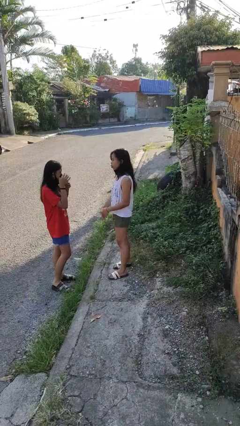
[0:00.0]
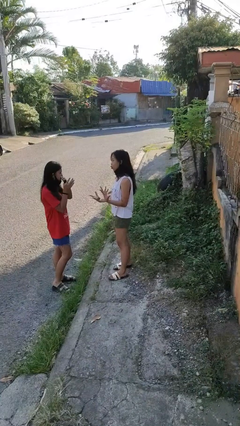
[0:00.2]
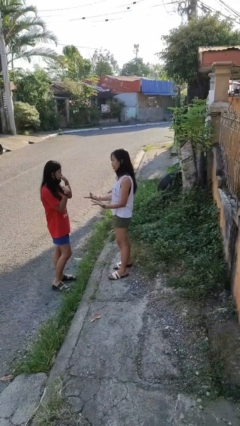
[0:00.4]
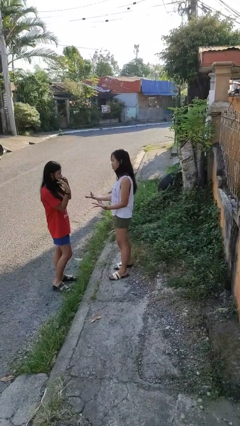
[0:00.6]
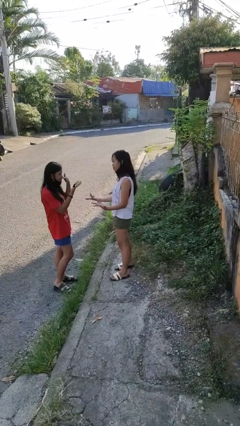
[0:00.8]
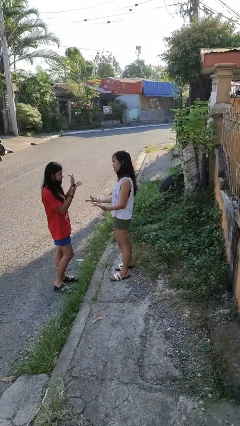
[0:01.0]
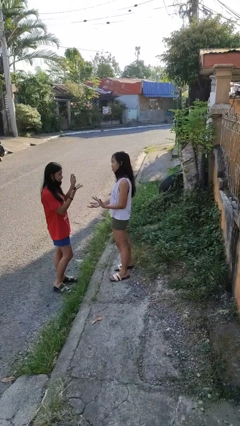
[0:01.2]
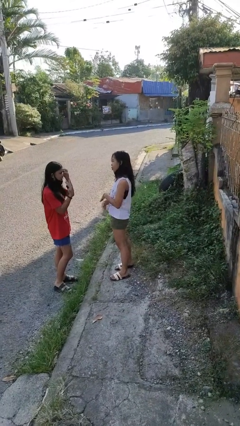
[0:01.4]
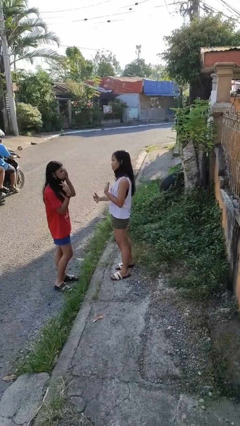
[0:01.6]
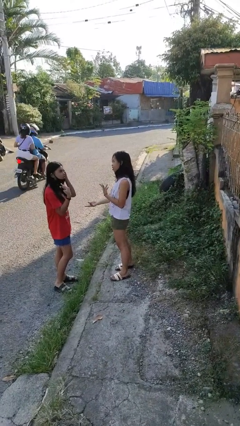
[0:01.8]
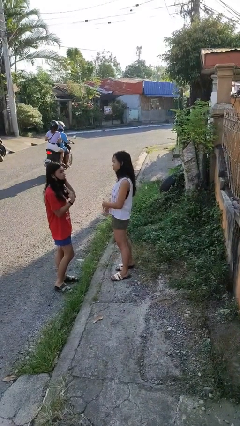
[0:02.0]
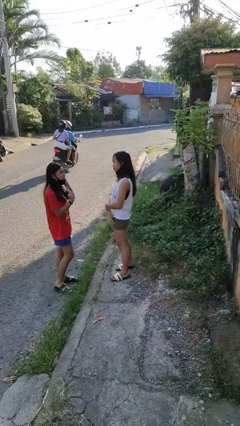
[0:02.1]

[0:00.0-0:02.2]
person talks to person

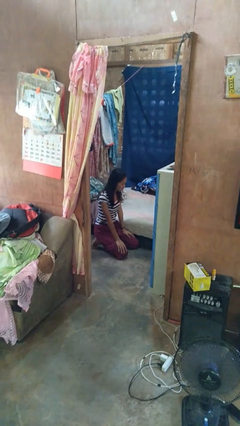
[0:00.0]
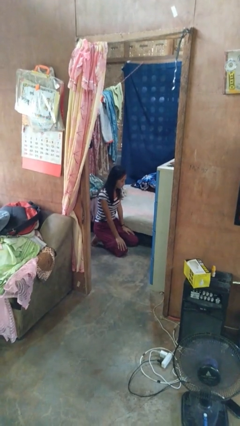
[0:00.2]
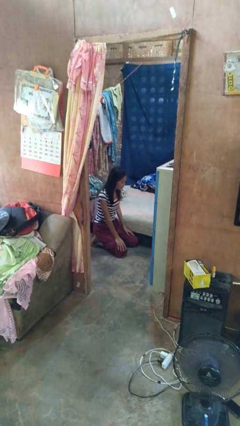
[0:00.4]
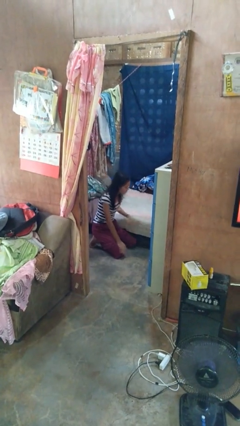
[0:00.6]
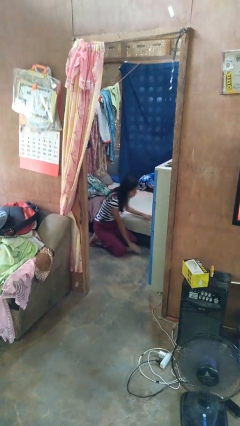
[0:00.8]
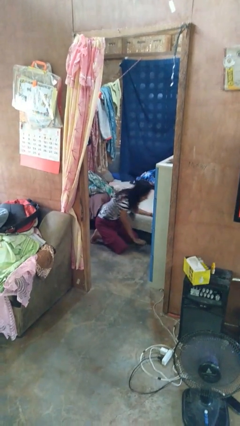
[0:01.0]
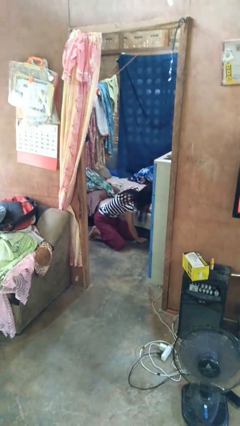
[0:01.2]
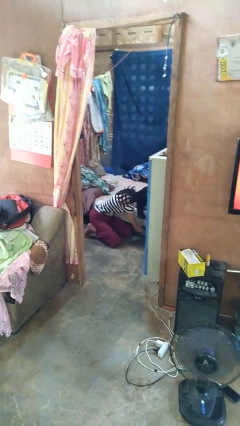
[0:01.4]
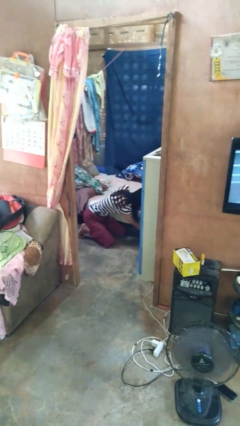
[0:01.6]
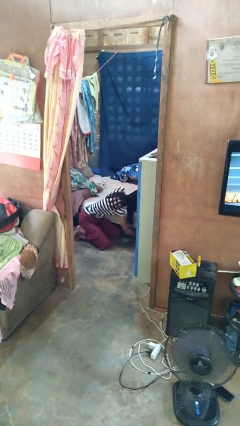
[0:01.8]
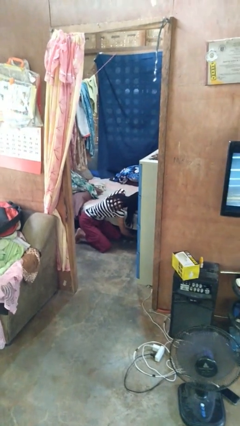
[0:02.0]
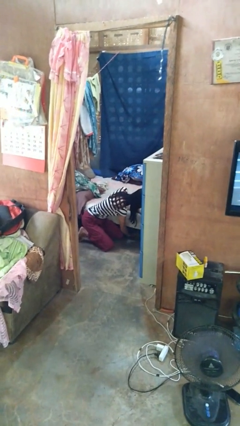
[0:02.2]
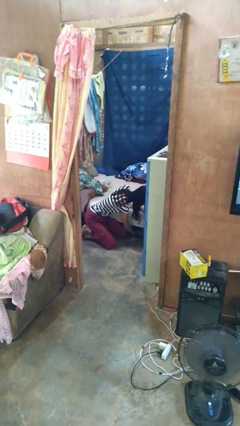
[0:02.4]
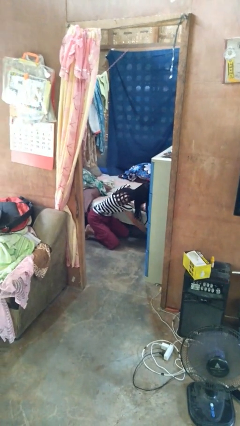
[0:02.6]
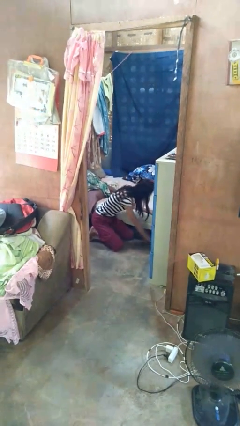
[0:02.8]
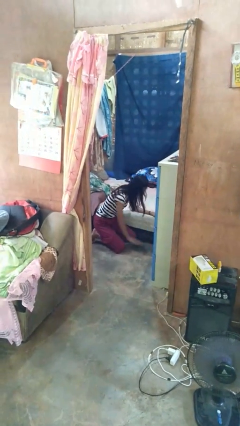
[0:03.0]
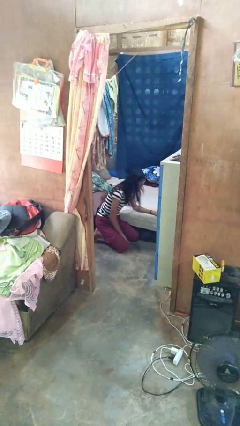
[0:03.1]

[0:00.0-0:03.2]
person searches under bed

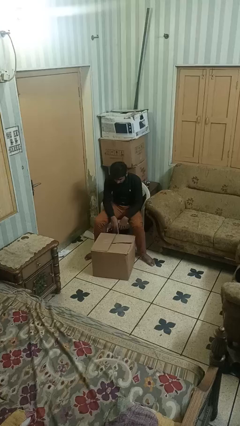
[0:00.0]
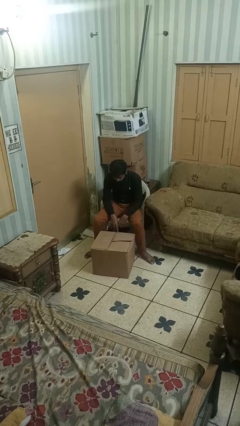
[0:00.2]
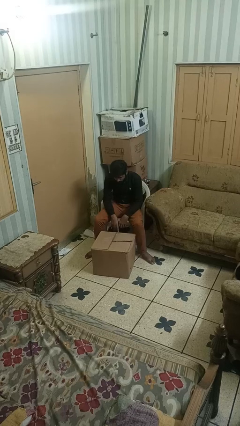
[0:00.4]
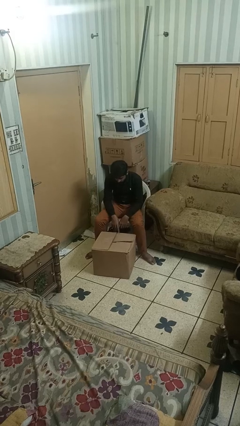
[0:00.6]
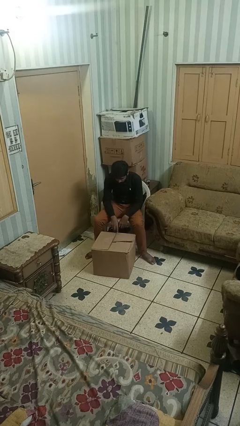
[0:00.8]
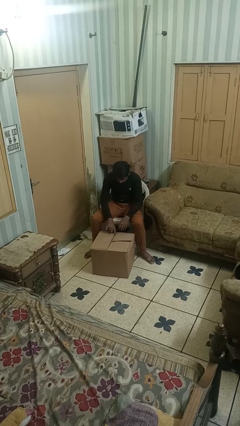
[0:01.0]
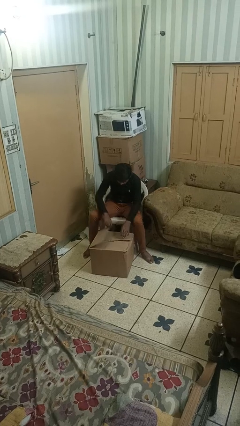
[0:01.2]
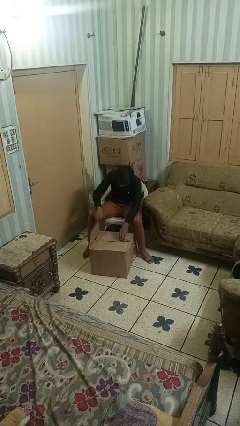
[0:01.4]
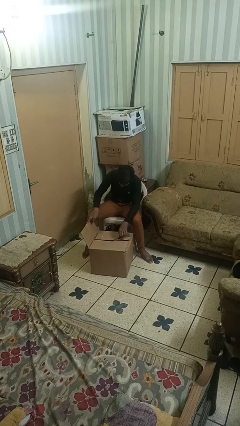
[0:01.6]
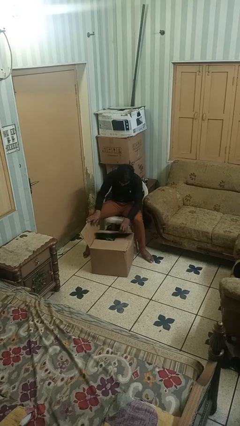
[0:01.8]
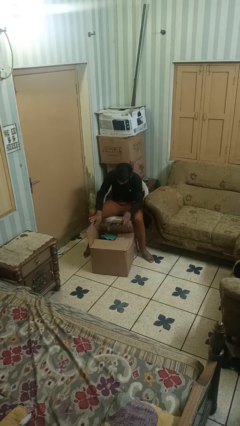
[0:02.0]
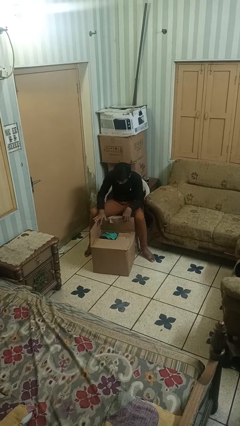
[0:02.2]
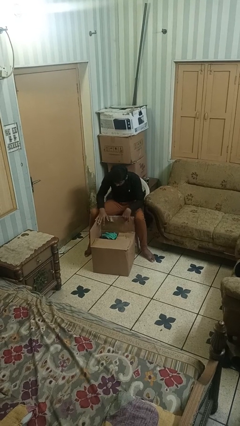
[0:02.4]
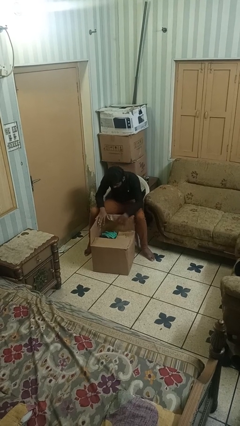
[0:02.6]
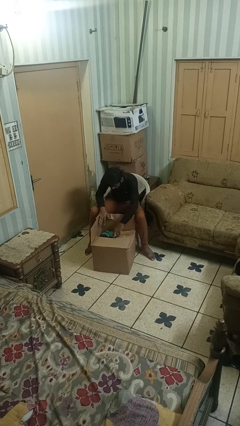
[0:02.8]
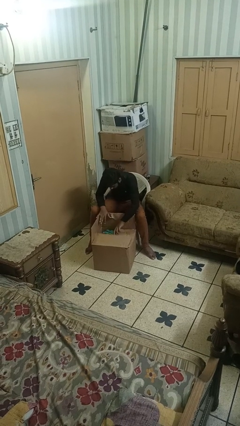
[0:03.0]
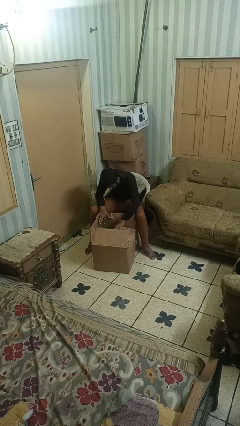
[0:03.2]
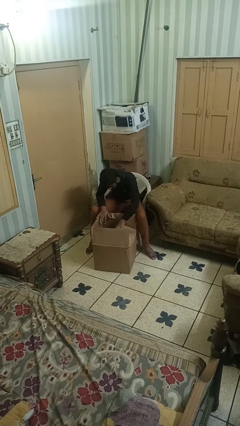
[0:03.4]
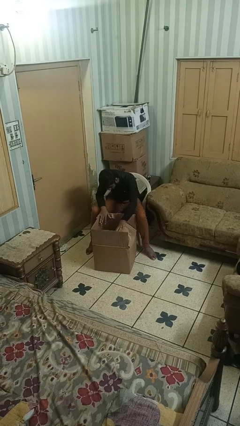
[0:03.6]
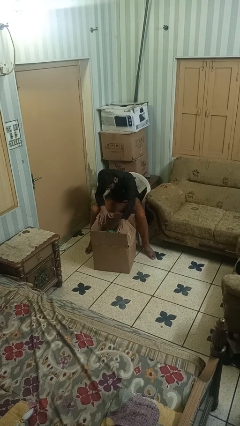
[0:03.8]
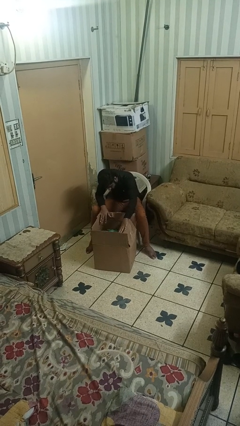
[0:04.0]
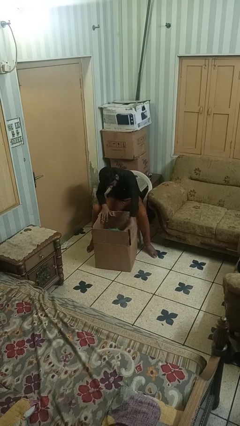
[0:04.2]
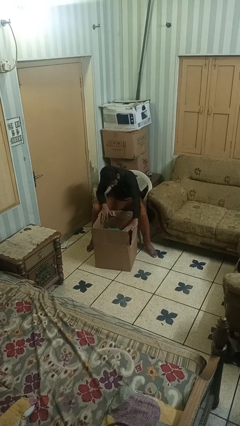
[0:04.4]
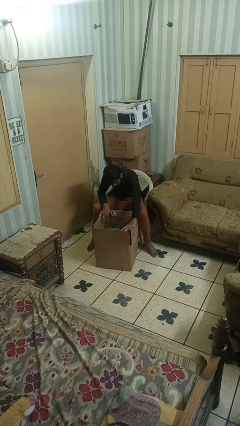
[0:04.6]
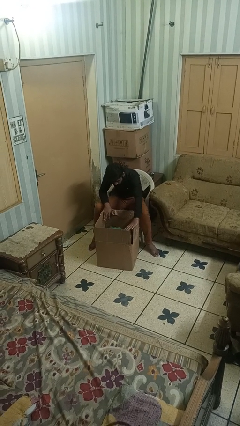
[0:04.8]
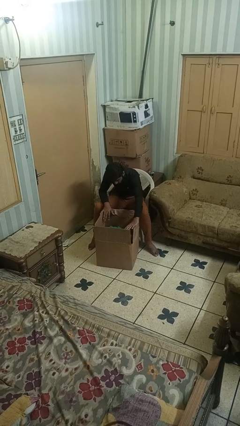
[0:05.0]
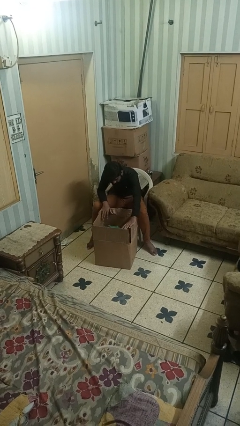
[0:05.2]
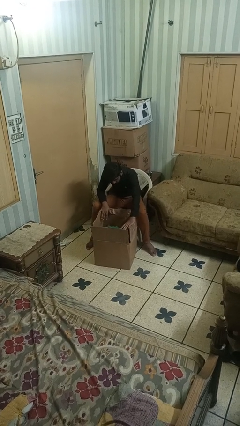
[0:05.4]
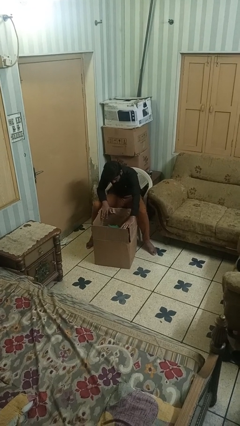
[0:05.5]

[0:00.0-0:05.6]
person opens box

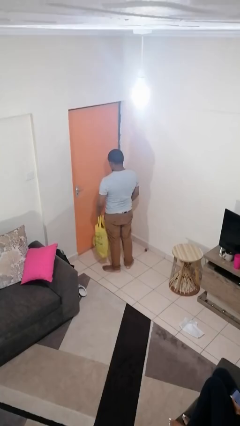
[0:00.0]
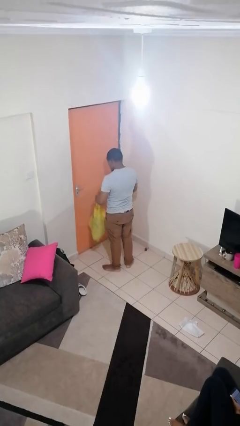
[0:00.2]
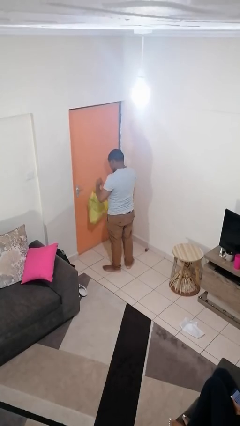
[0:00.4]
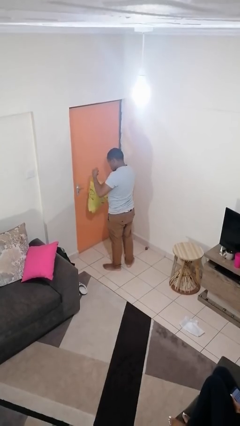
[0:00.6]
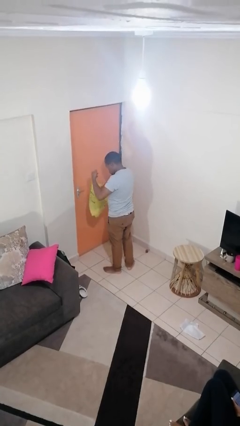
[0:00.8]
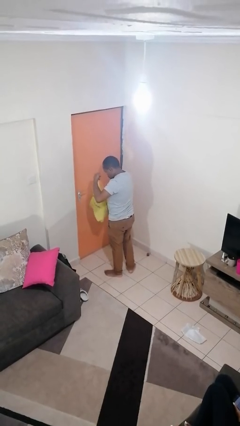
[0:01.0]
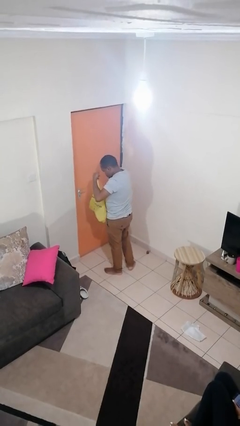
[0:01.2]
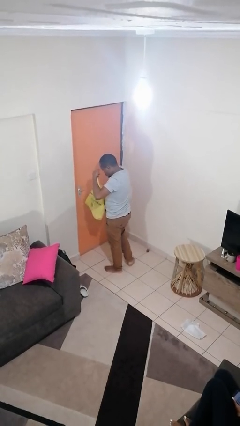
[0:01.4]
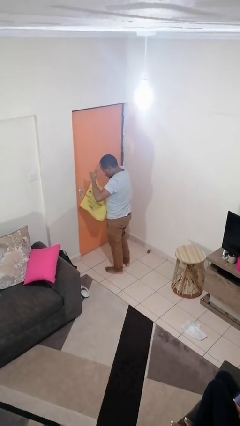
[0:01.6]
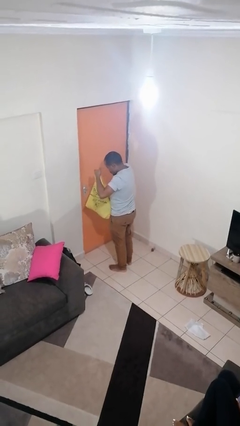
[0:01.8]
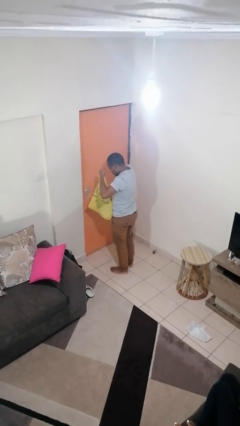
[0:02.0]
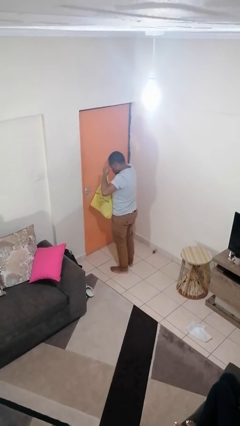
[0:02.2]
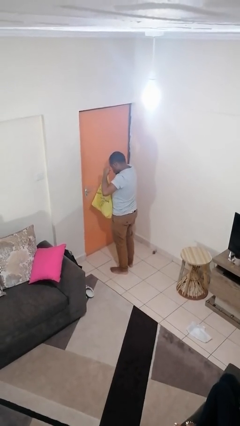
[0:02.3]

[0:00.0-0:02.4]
person searches in bag

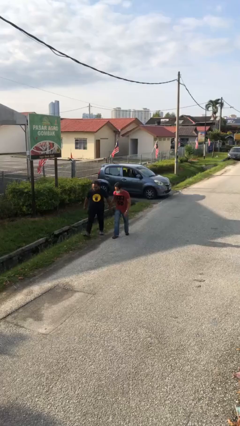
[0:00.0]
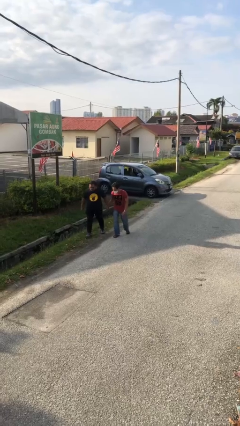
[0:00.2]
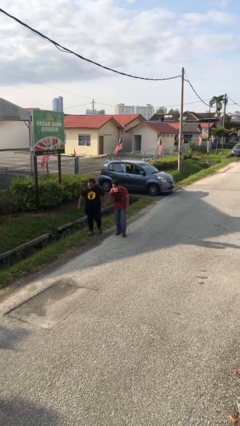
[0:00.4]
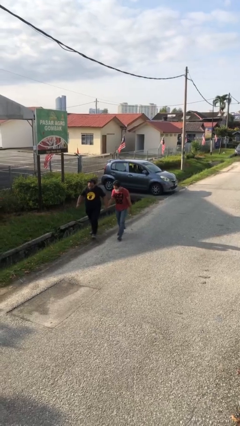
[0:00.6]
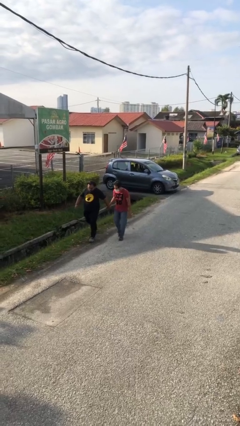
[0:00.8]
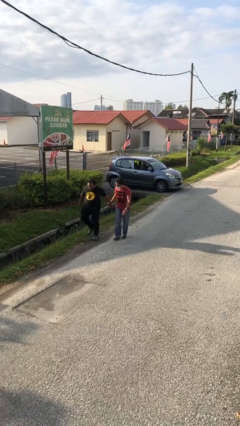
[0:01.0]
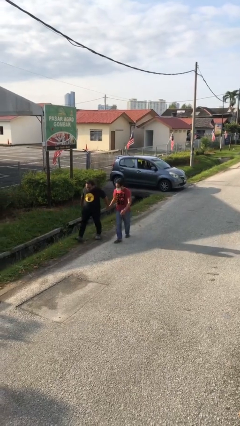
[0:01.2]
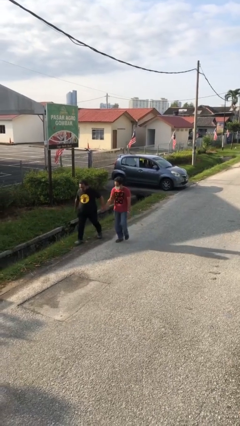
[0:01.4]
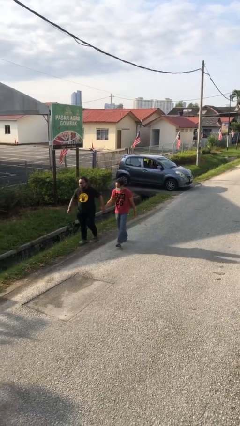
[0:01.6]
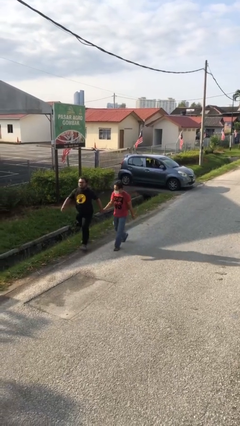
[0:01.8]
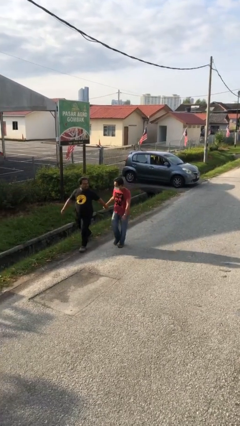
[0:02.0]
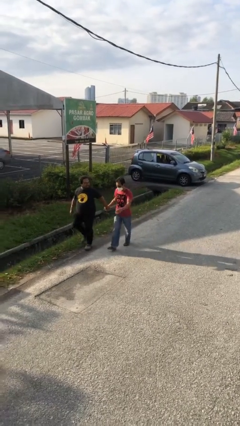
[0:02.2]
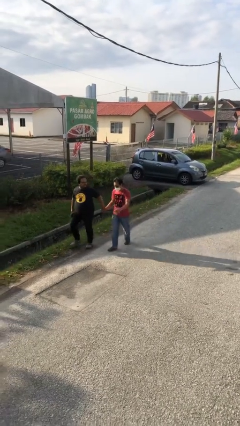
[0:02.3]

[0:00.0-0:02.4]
person holds hand

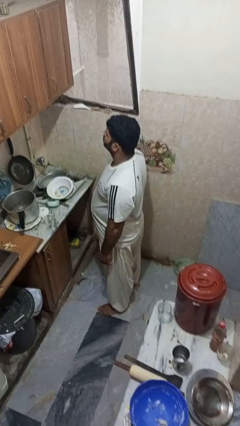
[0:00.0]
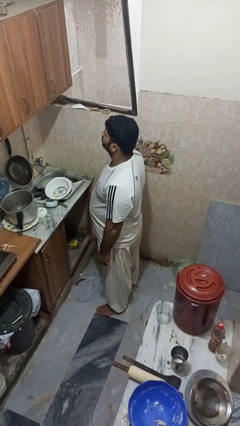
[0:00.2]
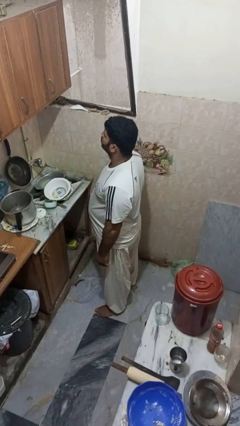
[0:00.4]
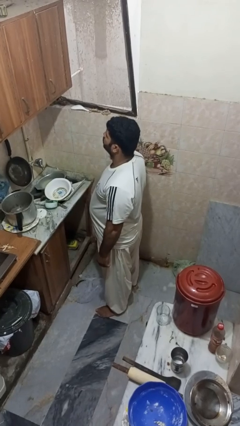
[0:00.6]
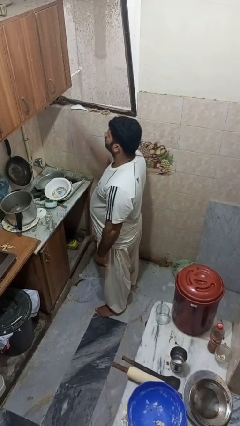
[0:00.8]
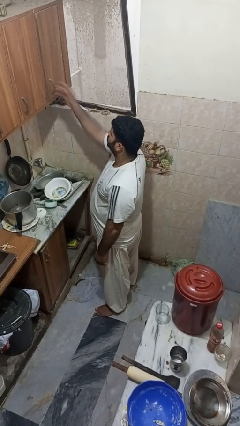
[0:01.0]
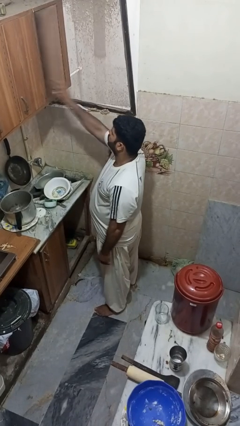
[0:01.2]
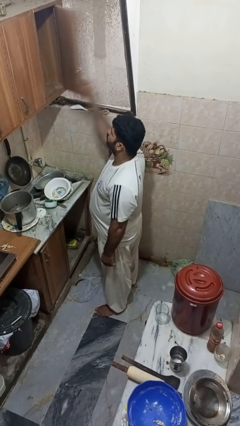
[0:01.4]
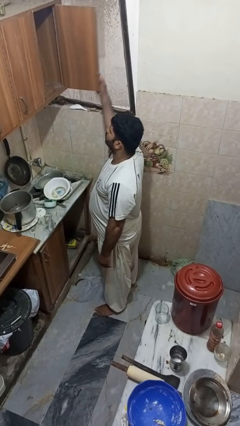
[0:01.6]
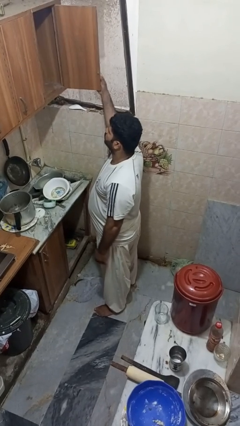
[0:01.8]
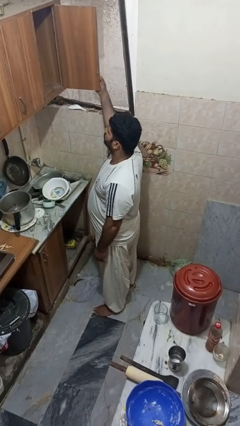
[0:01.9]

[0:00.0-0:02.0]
person opens cabinet
